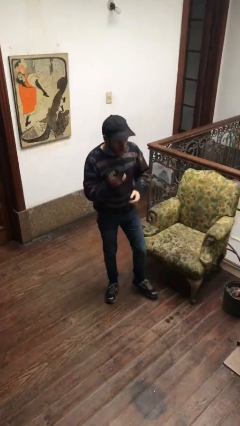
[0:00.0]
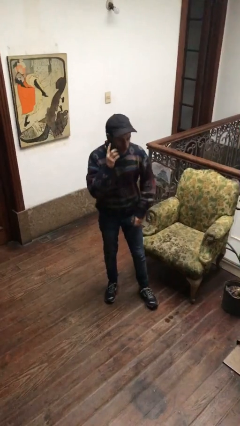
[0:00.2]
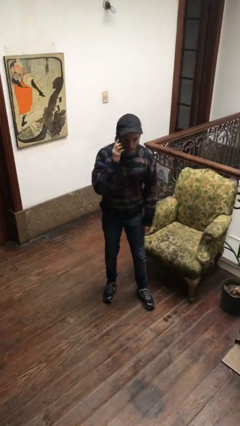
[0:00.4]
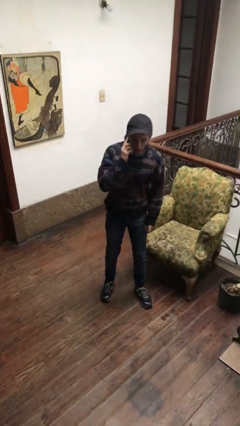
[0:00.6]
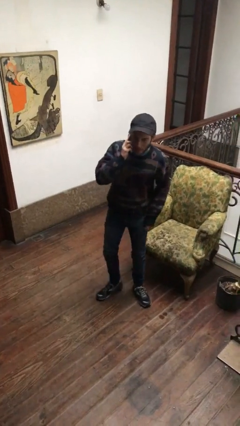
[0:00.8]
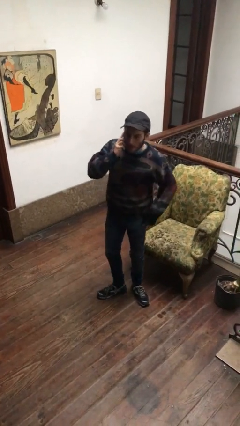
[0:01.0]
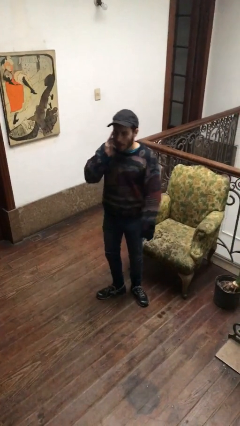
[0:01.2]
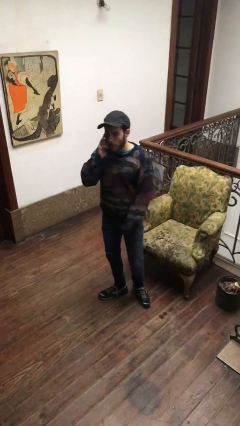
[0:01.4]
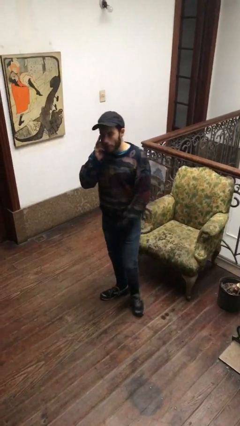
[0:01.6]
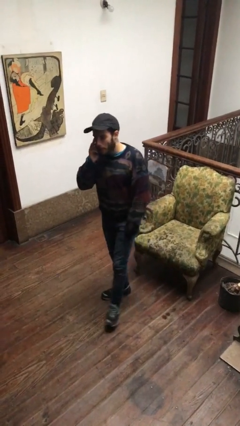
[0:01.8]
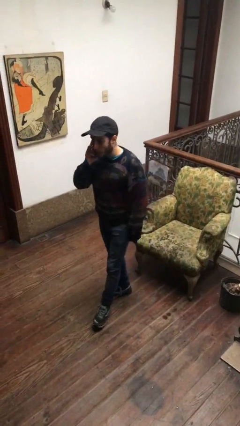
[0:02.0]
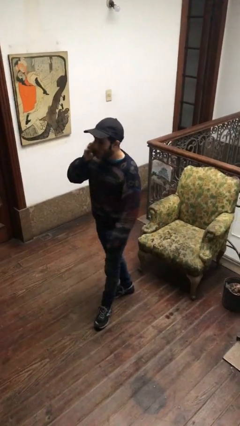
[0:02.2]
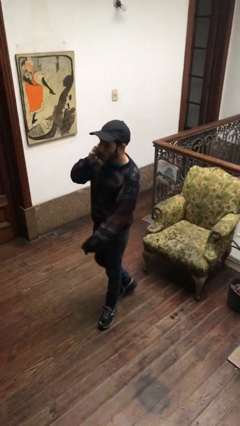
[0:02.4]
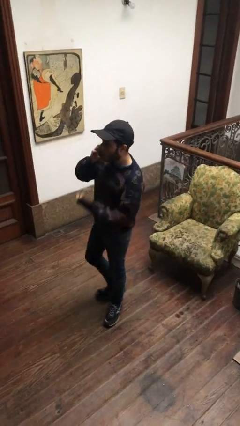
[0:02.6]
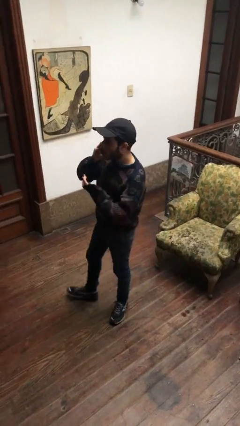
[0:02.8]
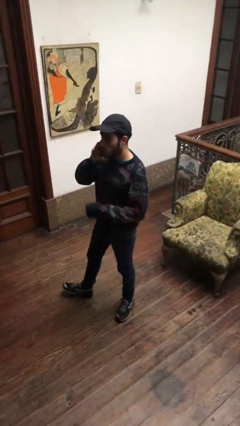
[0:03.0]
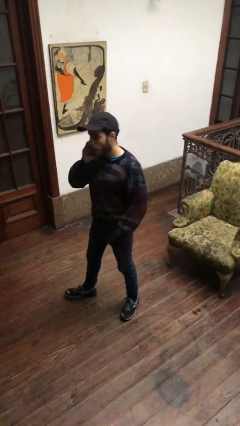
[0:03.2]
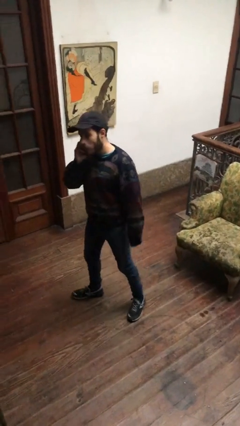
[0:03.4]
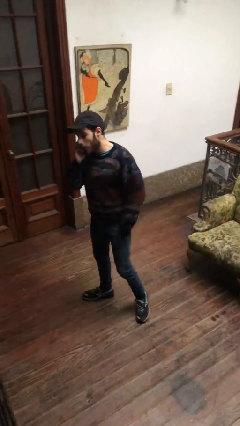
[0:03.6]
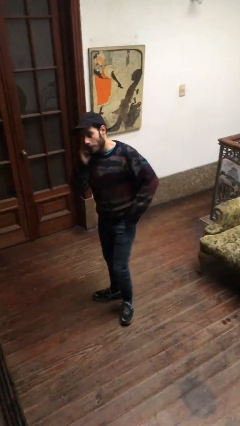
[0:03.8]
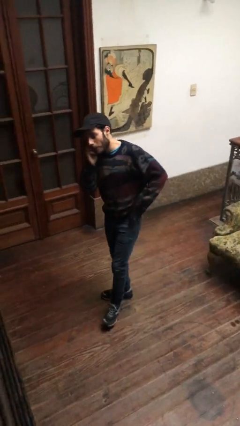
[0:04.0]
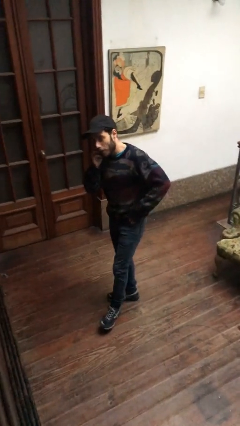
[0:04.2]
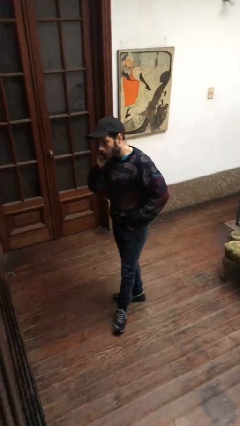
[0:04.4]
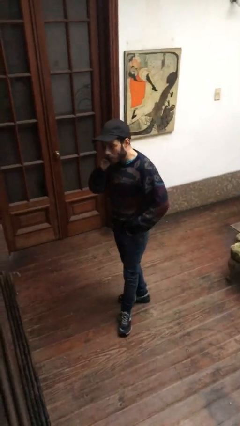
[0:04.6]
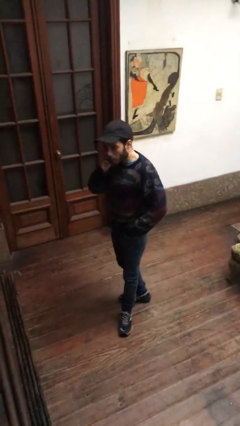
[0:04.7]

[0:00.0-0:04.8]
person talks on phone

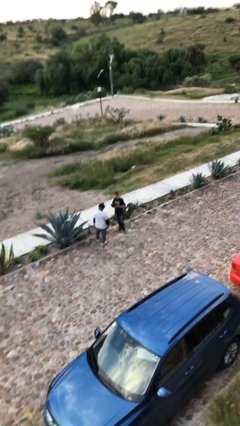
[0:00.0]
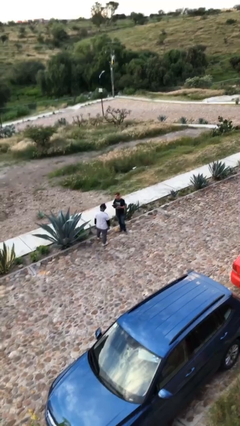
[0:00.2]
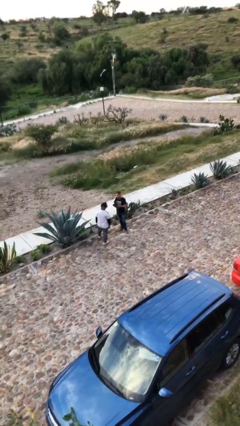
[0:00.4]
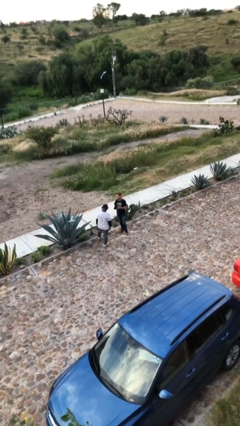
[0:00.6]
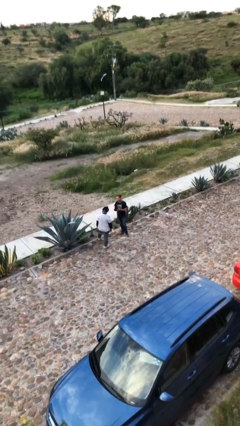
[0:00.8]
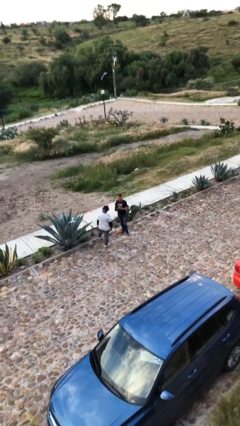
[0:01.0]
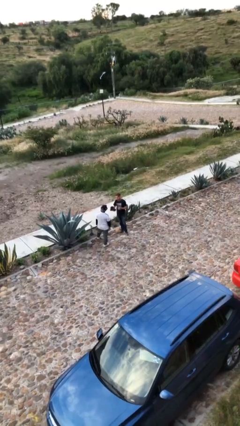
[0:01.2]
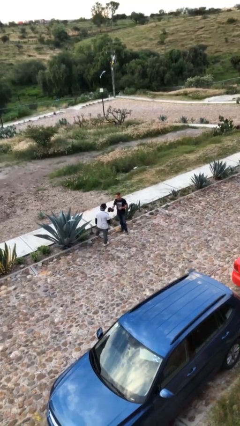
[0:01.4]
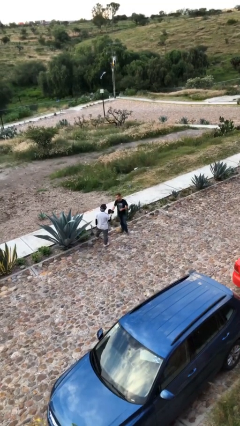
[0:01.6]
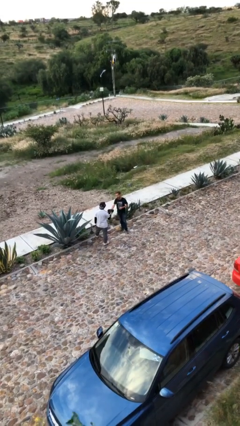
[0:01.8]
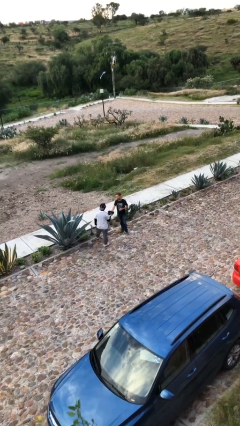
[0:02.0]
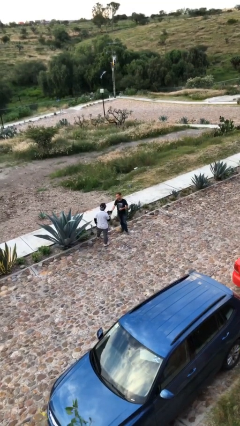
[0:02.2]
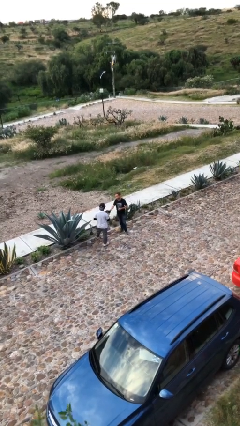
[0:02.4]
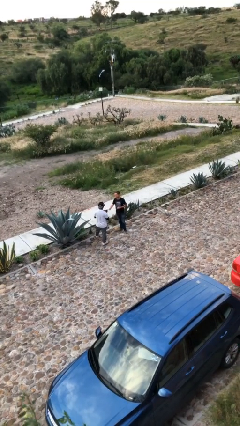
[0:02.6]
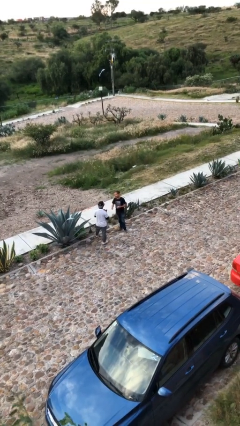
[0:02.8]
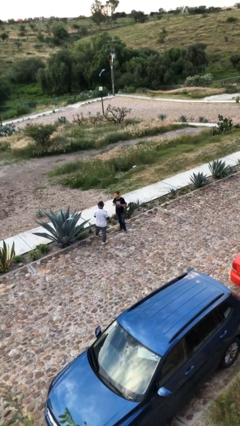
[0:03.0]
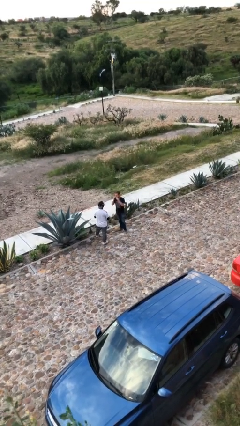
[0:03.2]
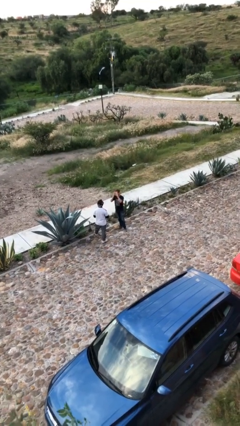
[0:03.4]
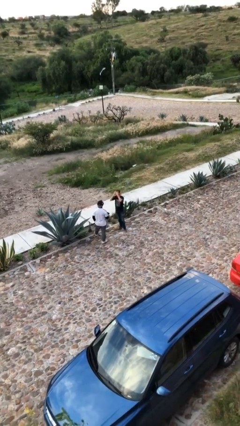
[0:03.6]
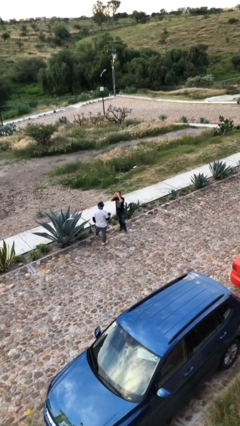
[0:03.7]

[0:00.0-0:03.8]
person transfers object to person

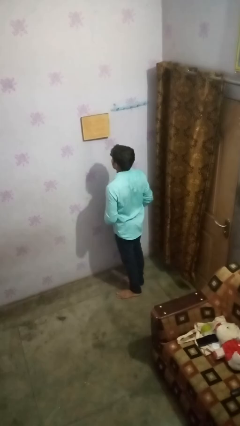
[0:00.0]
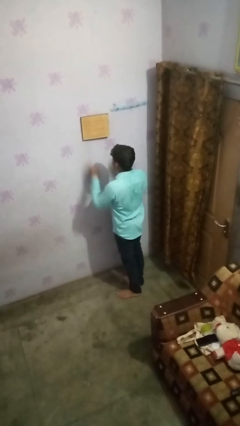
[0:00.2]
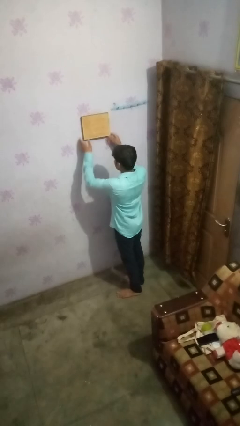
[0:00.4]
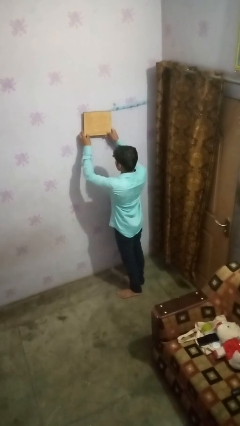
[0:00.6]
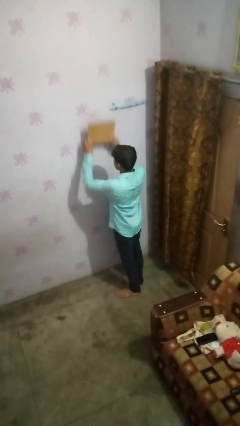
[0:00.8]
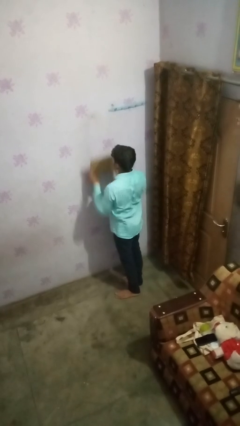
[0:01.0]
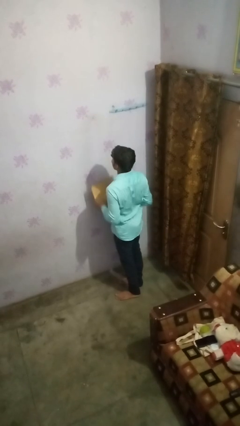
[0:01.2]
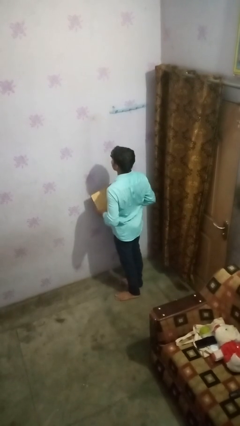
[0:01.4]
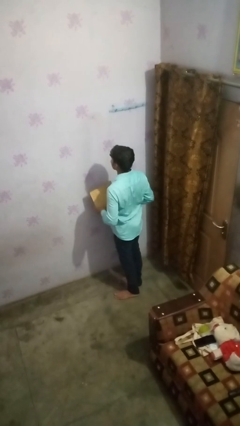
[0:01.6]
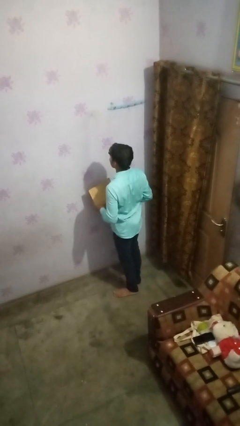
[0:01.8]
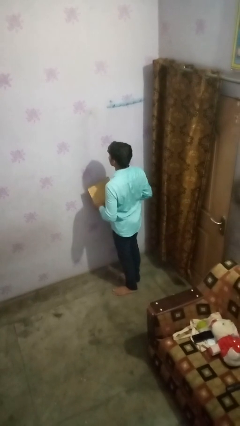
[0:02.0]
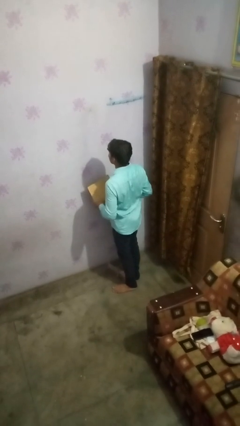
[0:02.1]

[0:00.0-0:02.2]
person takes down picture frame

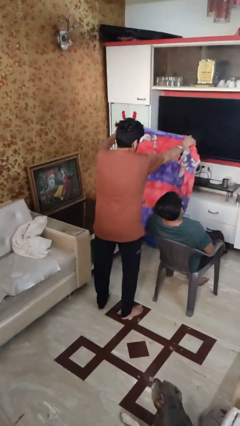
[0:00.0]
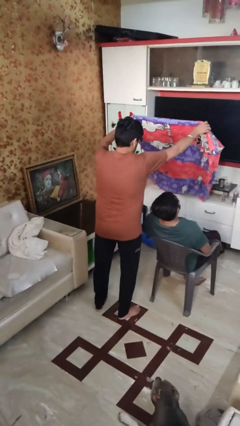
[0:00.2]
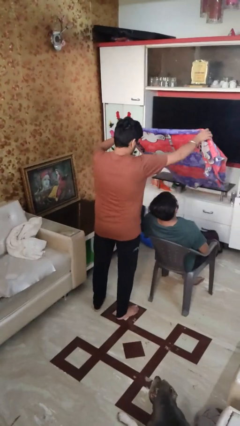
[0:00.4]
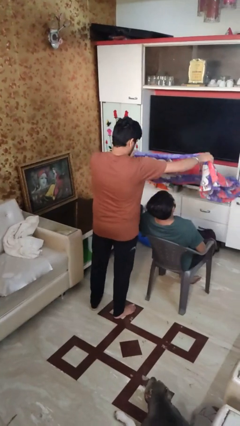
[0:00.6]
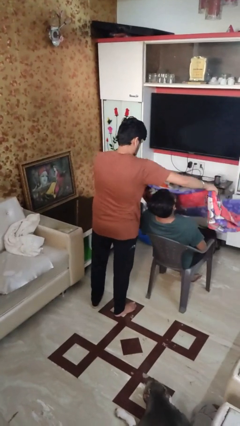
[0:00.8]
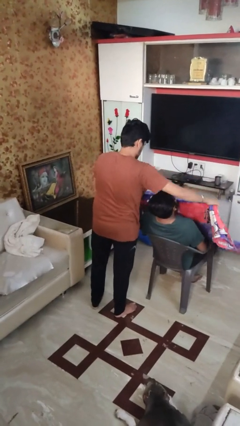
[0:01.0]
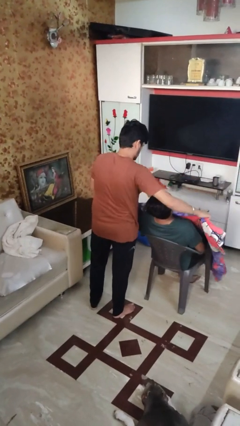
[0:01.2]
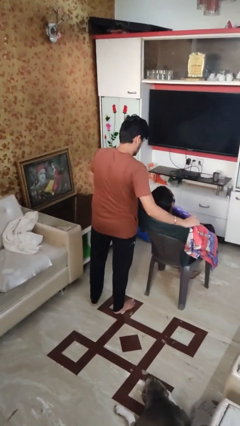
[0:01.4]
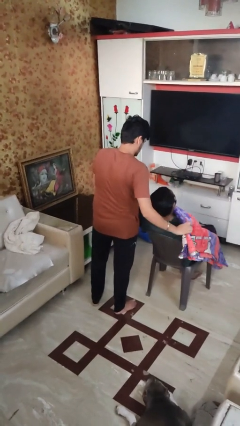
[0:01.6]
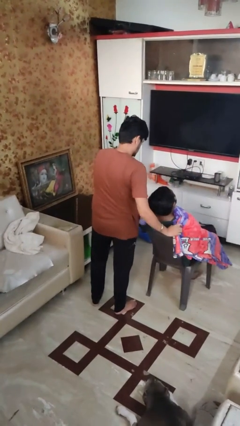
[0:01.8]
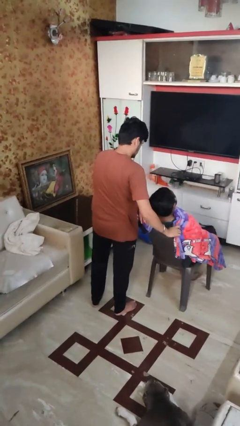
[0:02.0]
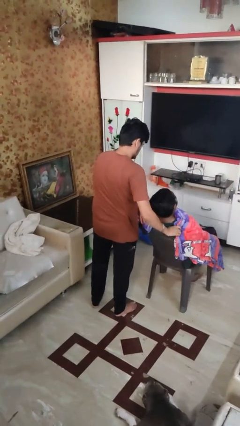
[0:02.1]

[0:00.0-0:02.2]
person covers friend with blanket

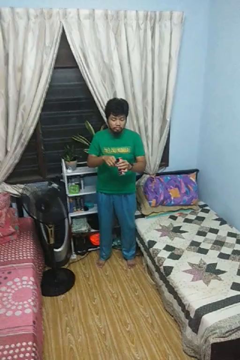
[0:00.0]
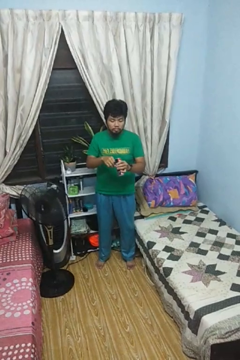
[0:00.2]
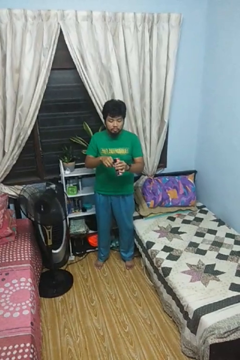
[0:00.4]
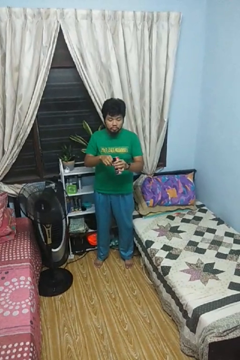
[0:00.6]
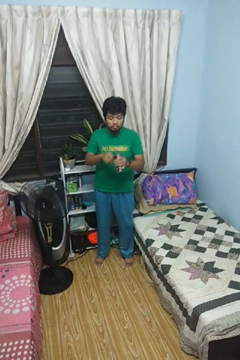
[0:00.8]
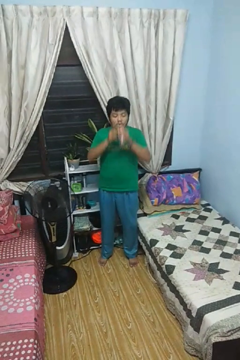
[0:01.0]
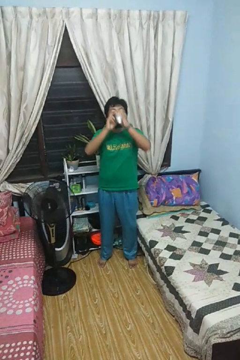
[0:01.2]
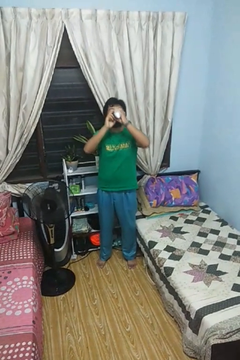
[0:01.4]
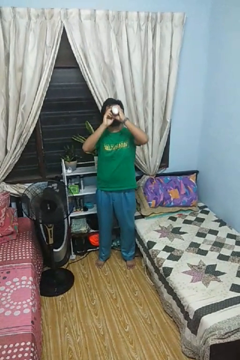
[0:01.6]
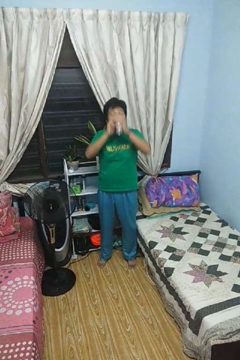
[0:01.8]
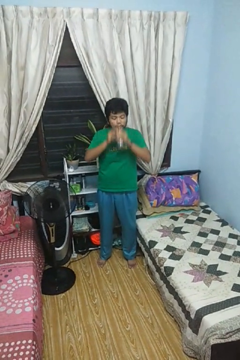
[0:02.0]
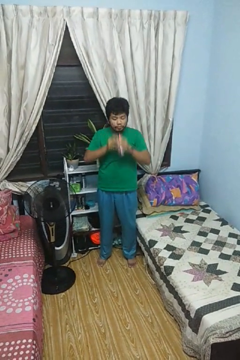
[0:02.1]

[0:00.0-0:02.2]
person drinks from beverage can

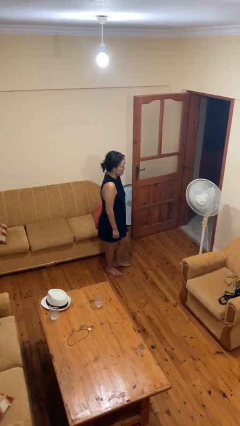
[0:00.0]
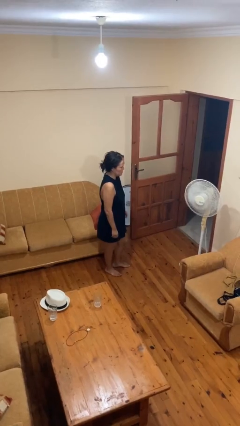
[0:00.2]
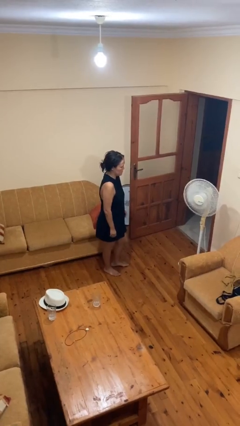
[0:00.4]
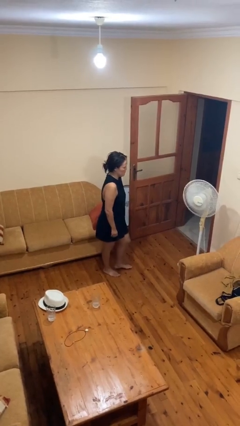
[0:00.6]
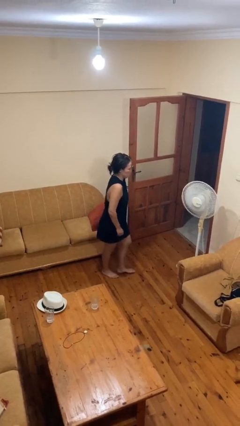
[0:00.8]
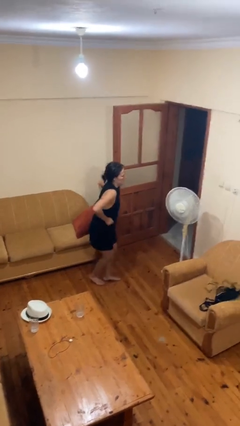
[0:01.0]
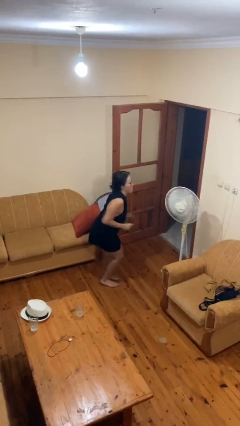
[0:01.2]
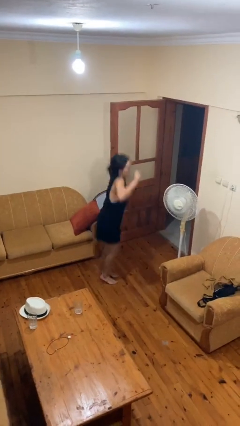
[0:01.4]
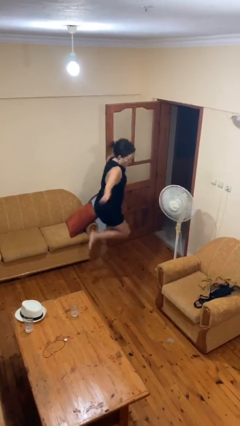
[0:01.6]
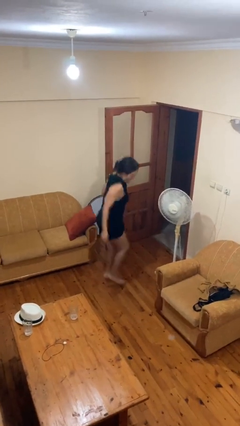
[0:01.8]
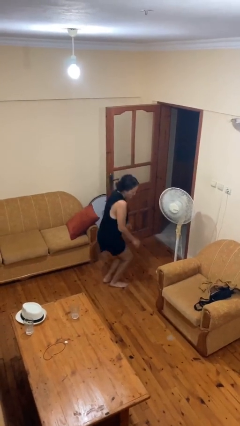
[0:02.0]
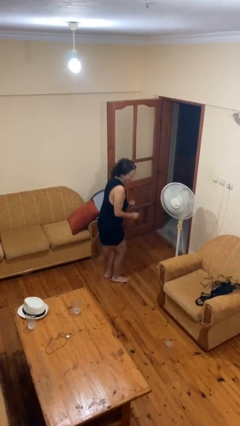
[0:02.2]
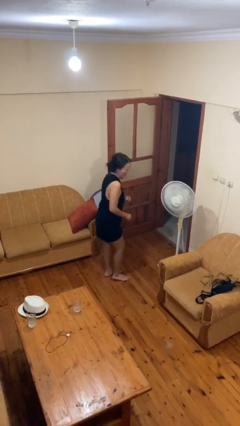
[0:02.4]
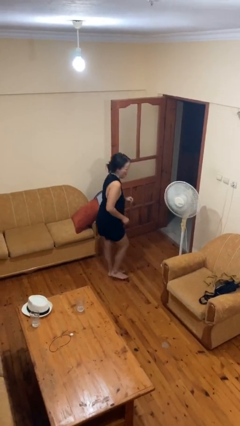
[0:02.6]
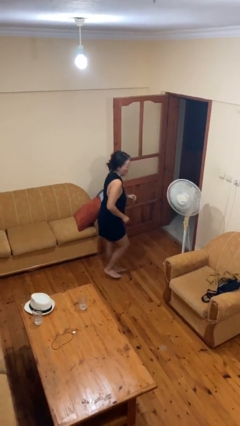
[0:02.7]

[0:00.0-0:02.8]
person jumps
